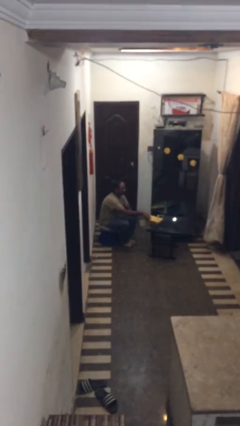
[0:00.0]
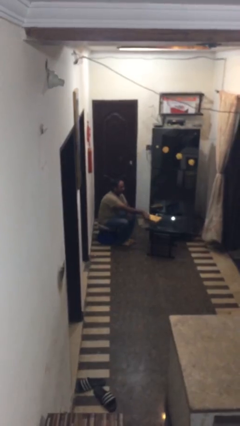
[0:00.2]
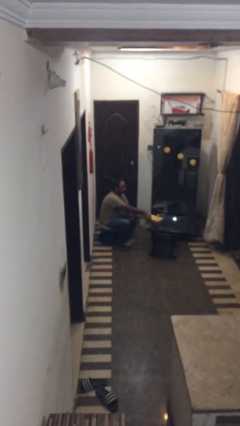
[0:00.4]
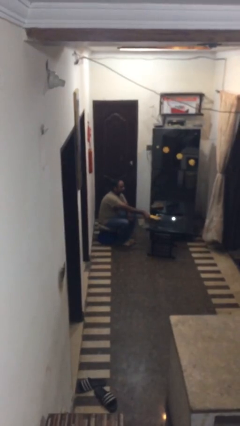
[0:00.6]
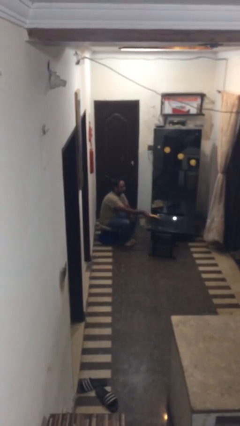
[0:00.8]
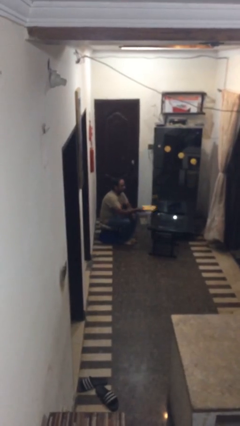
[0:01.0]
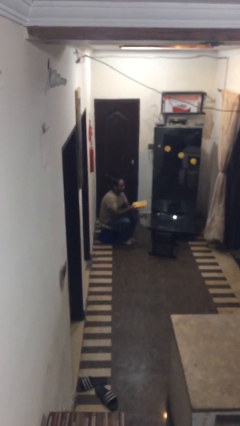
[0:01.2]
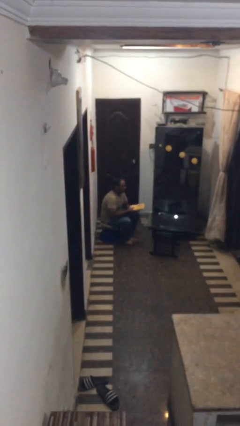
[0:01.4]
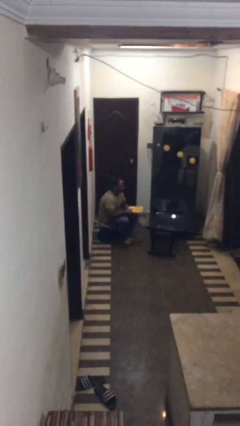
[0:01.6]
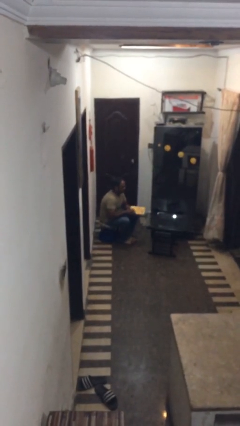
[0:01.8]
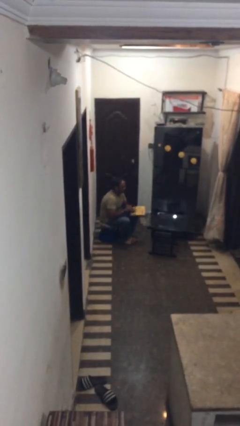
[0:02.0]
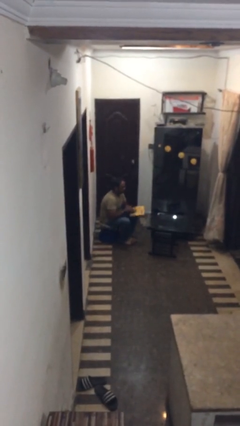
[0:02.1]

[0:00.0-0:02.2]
person picks up object from table

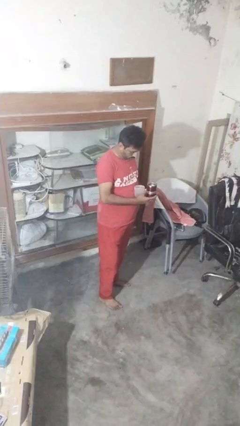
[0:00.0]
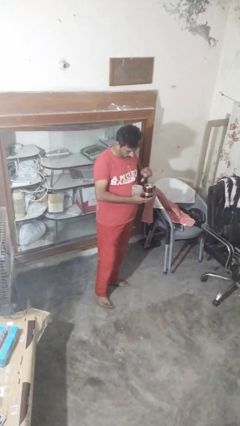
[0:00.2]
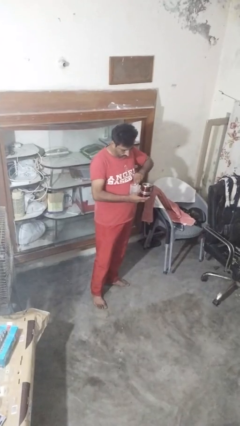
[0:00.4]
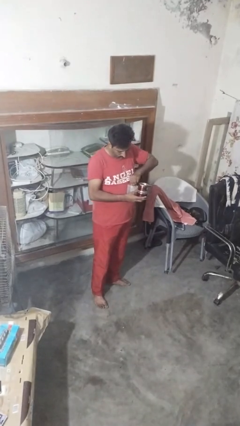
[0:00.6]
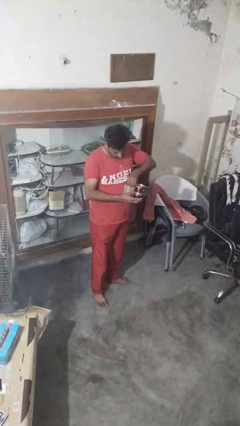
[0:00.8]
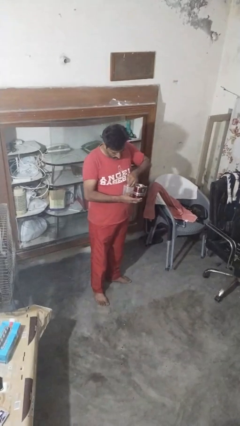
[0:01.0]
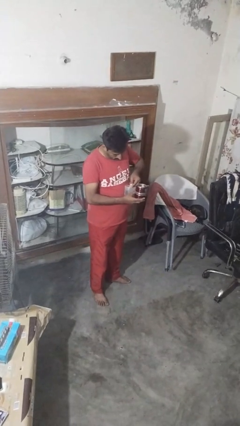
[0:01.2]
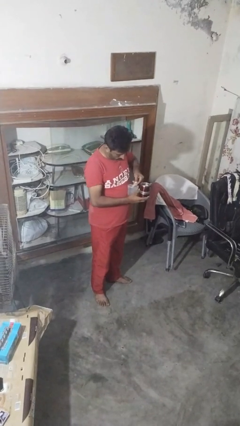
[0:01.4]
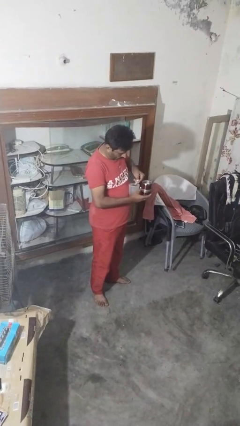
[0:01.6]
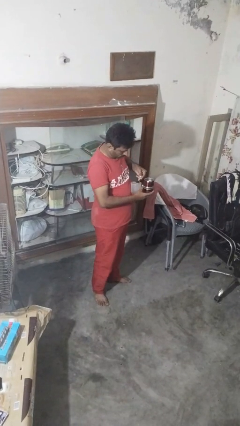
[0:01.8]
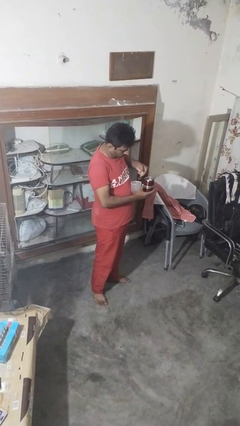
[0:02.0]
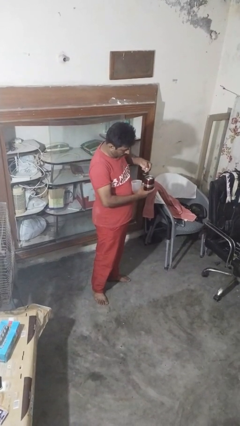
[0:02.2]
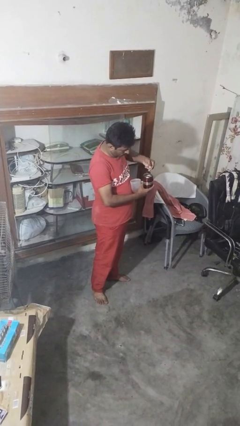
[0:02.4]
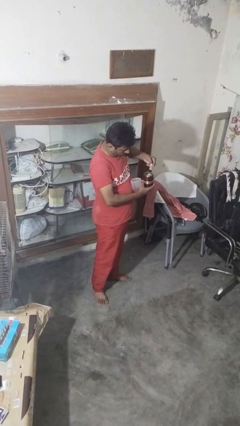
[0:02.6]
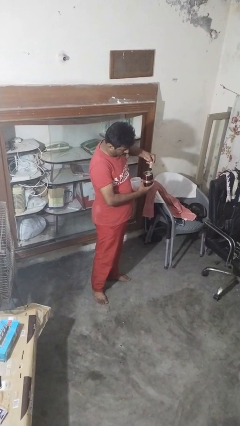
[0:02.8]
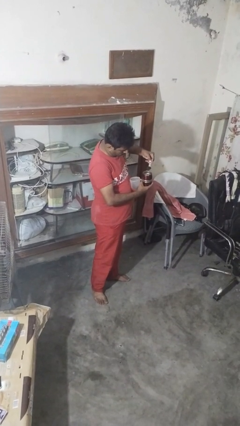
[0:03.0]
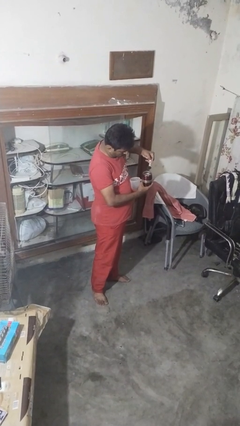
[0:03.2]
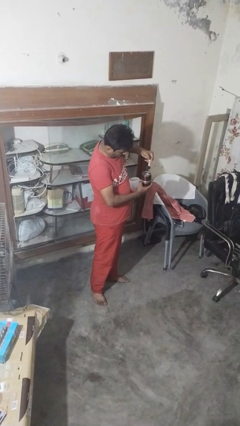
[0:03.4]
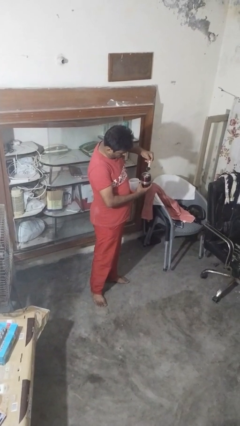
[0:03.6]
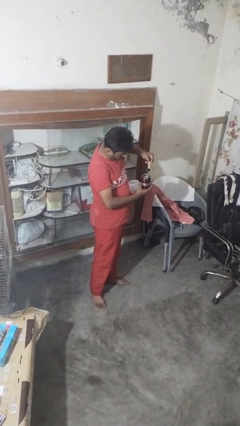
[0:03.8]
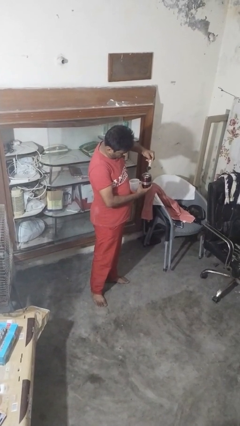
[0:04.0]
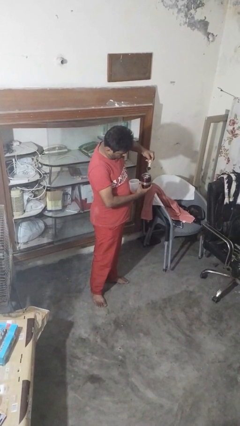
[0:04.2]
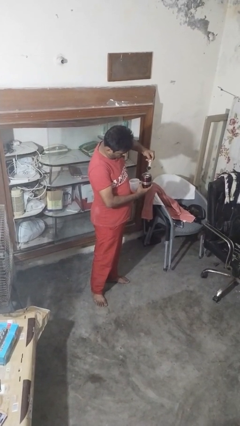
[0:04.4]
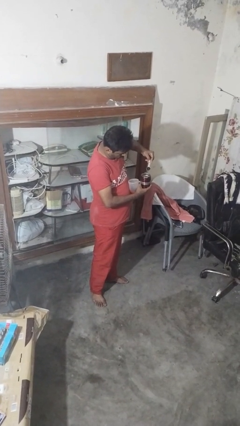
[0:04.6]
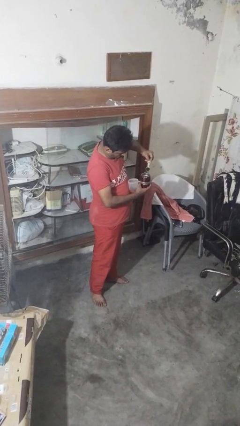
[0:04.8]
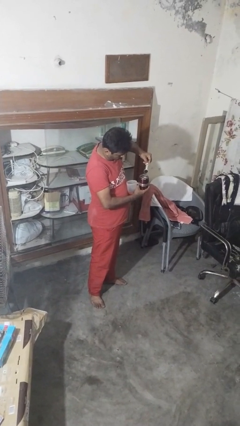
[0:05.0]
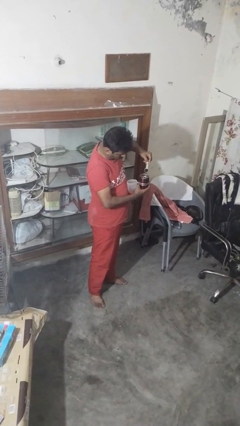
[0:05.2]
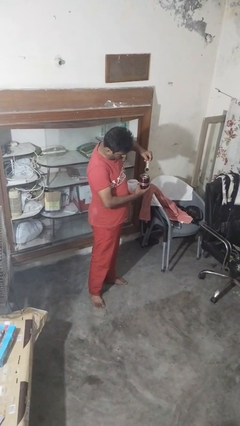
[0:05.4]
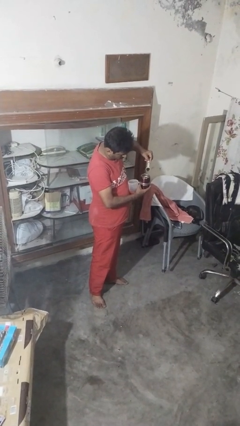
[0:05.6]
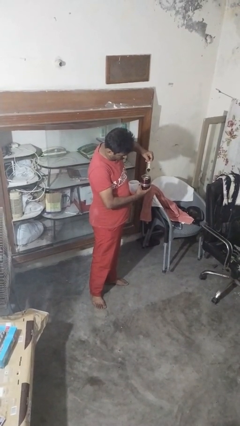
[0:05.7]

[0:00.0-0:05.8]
person pours coffee into mug

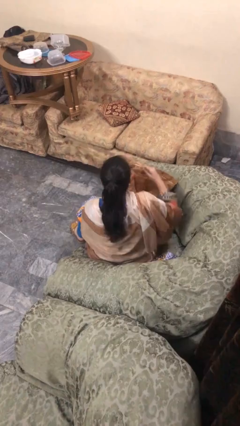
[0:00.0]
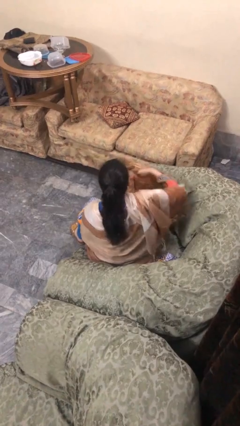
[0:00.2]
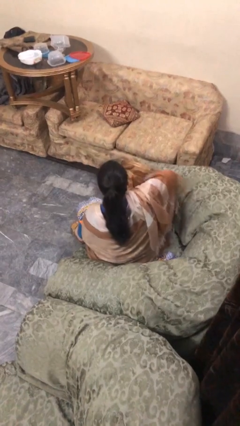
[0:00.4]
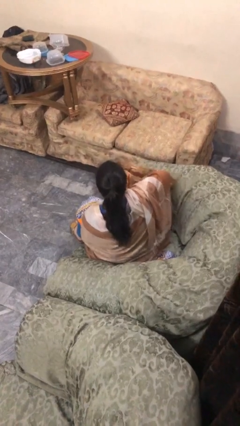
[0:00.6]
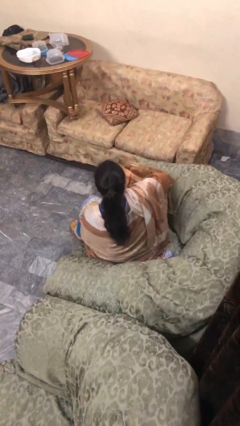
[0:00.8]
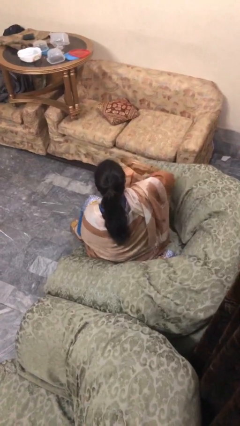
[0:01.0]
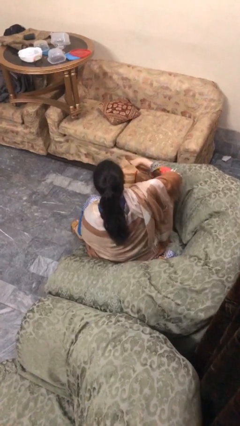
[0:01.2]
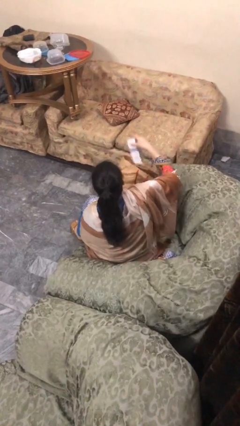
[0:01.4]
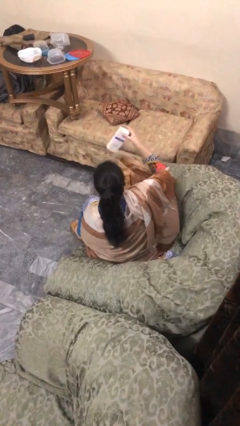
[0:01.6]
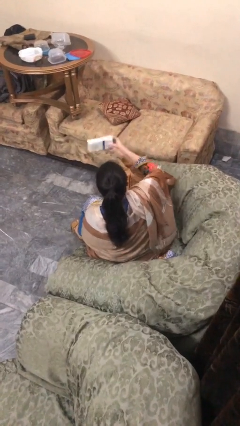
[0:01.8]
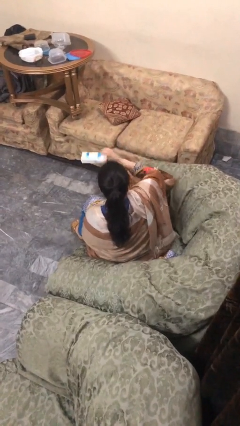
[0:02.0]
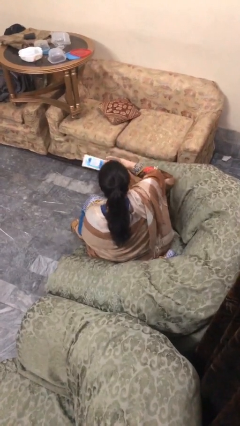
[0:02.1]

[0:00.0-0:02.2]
person takes object from bag

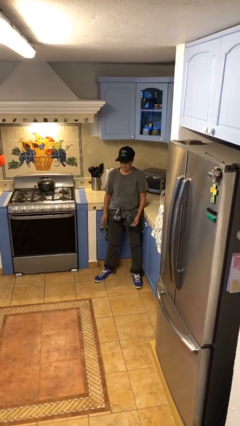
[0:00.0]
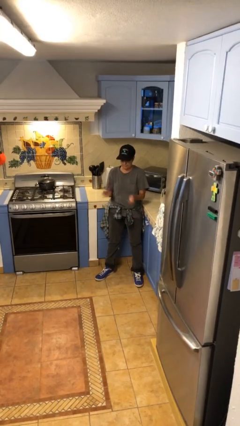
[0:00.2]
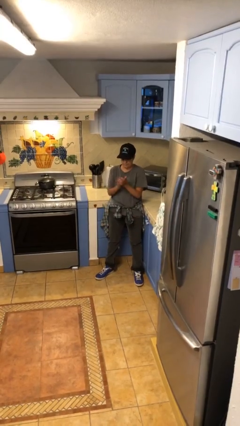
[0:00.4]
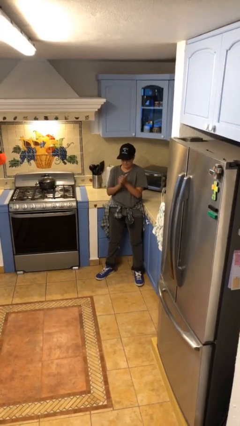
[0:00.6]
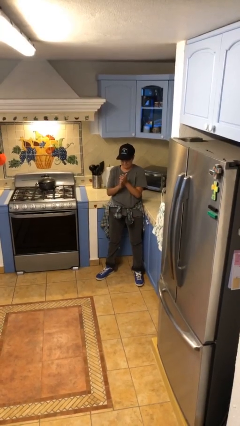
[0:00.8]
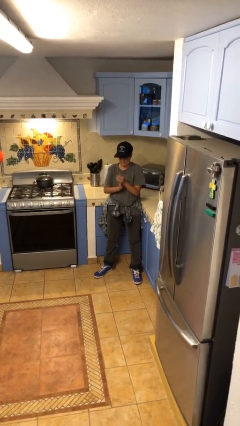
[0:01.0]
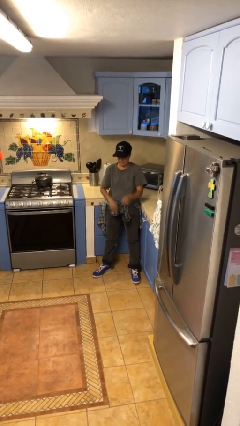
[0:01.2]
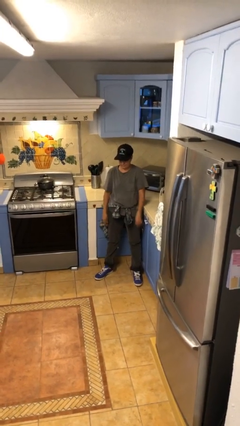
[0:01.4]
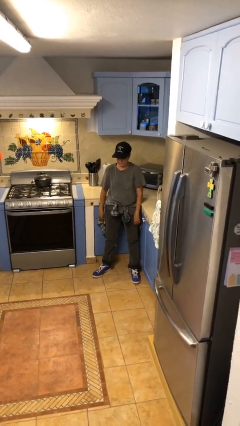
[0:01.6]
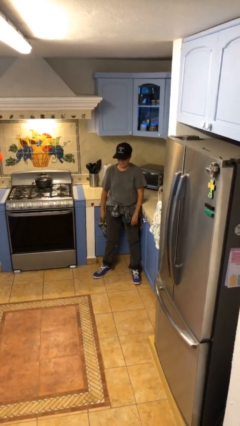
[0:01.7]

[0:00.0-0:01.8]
person claps hands

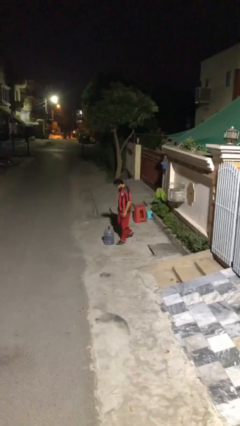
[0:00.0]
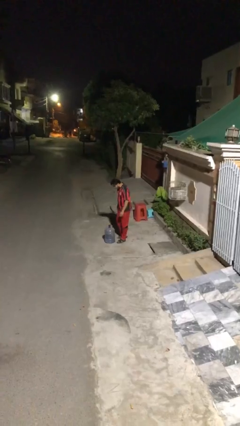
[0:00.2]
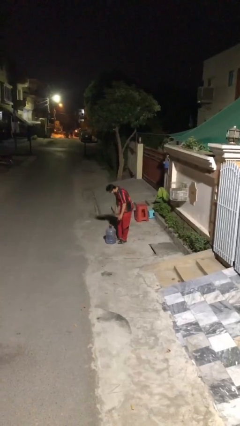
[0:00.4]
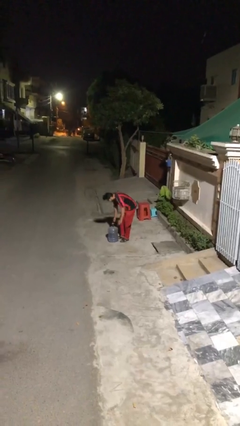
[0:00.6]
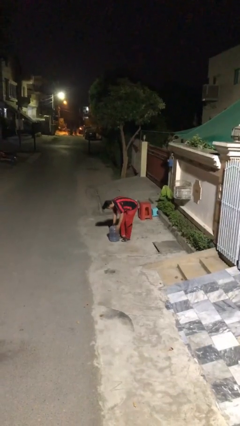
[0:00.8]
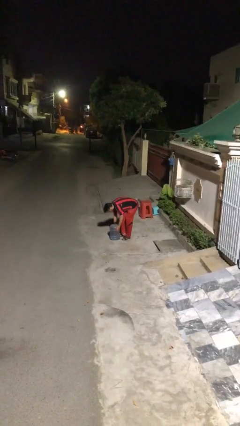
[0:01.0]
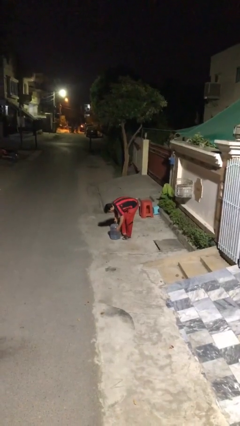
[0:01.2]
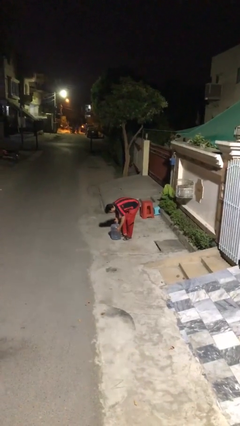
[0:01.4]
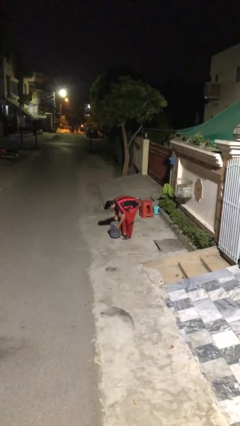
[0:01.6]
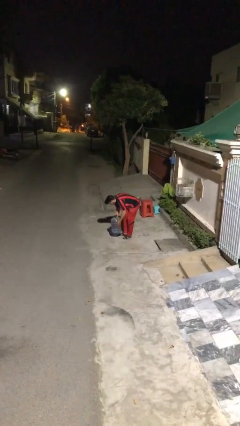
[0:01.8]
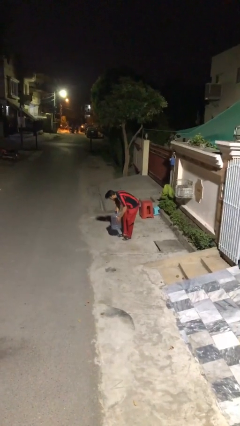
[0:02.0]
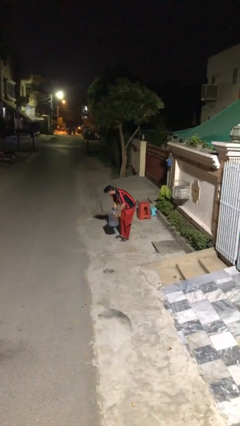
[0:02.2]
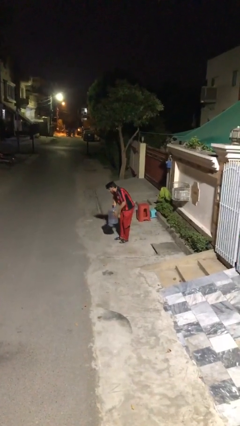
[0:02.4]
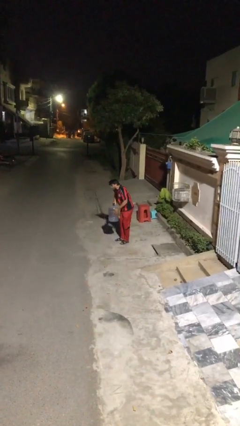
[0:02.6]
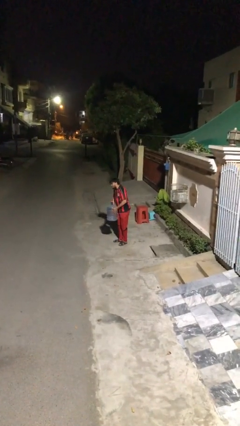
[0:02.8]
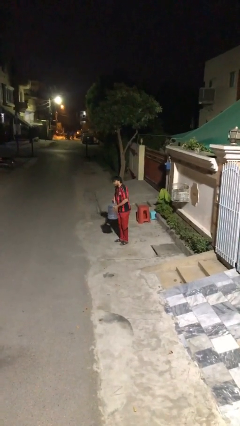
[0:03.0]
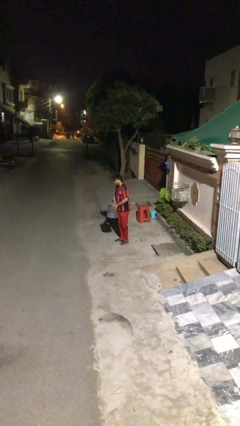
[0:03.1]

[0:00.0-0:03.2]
person picks up object from floor

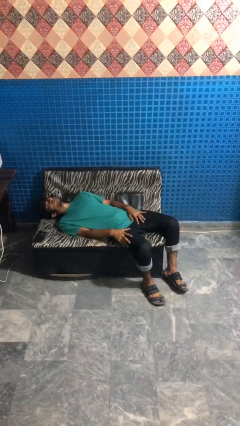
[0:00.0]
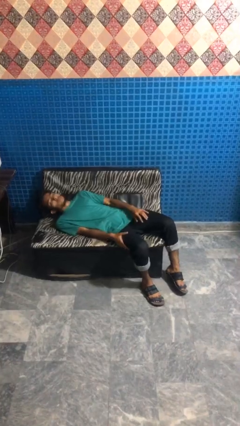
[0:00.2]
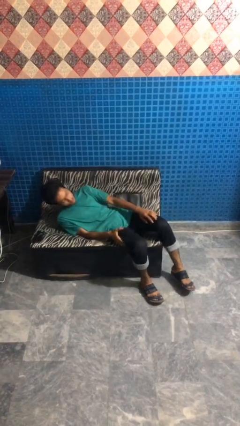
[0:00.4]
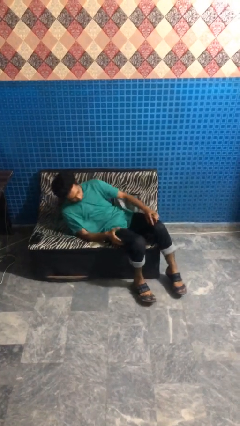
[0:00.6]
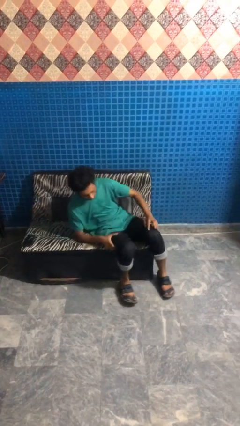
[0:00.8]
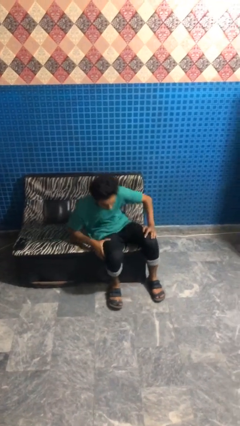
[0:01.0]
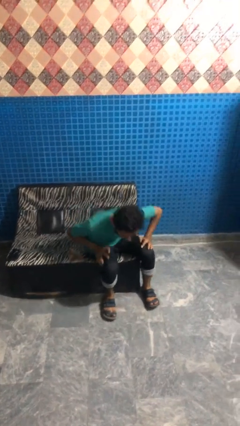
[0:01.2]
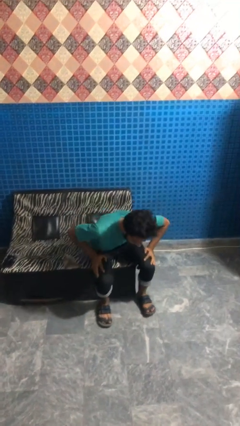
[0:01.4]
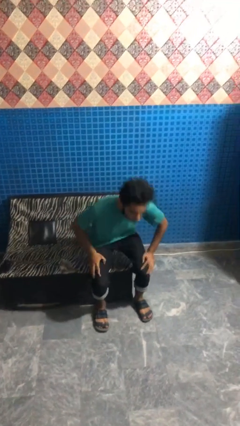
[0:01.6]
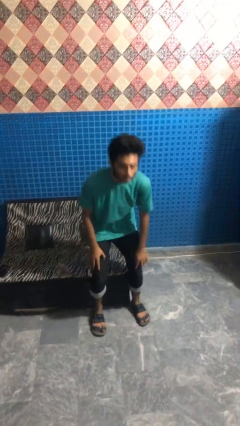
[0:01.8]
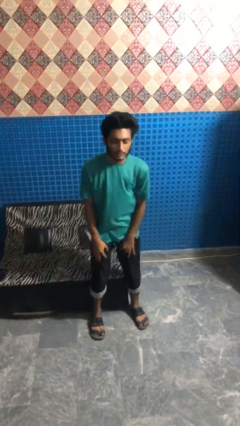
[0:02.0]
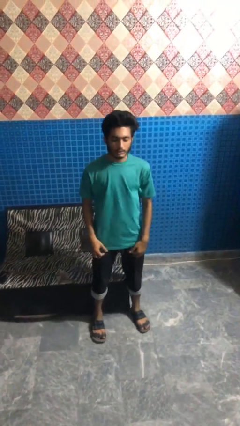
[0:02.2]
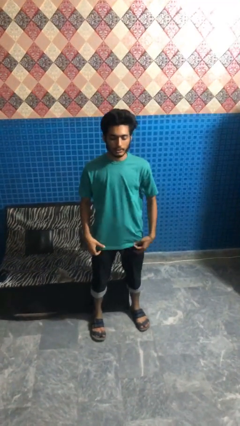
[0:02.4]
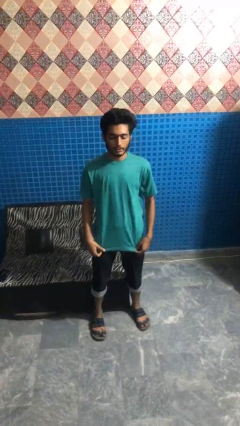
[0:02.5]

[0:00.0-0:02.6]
person stands up
